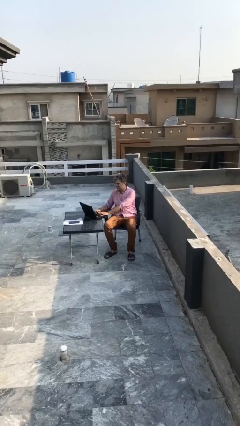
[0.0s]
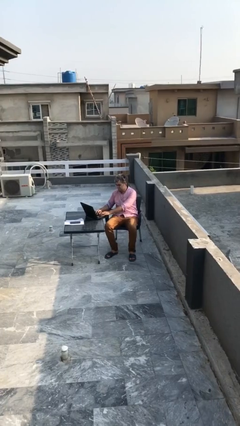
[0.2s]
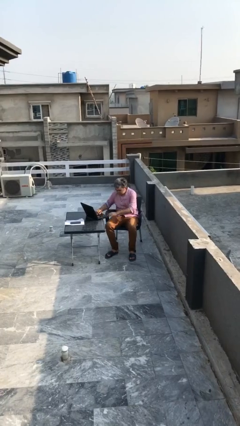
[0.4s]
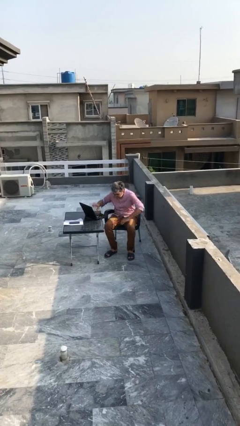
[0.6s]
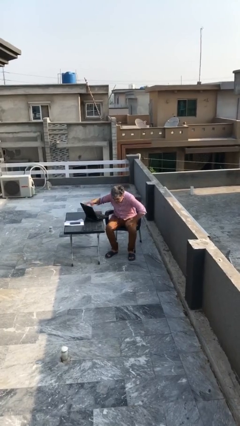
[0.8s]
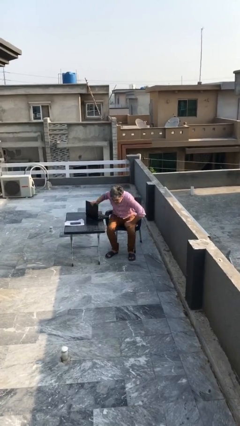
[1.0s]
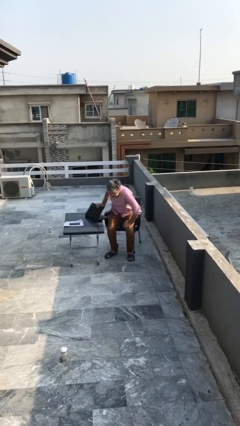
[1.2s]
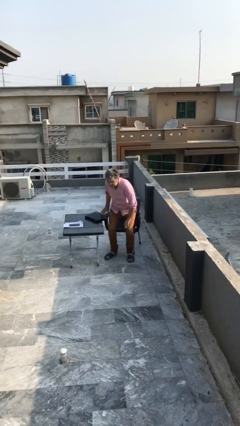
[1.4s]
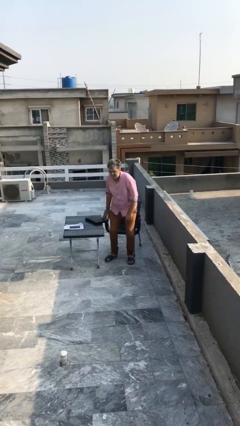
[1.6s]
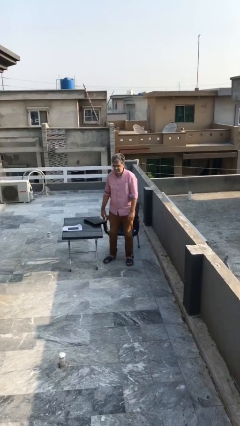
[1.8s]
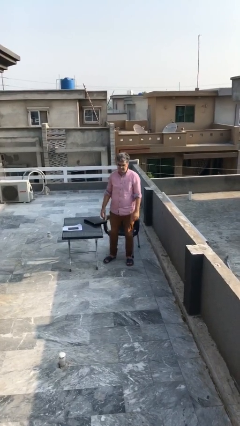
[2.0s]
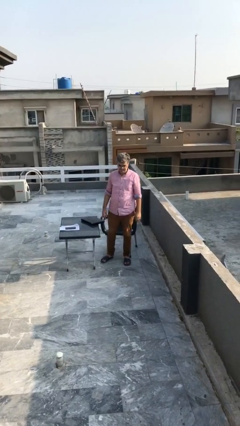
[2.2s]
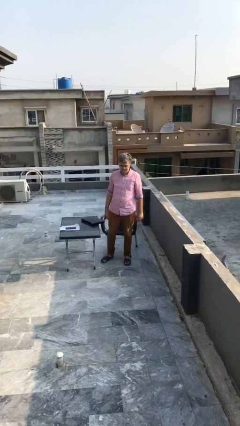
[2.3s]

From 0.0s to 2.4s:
person stands up

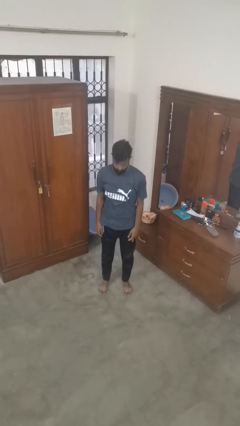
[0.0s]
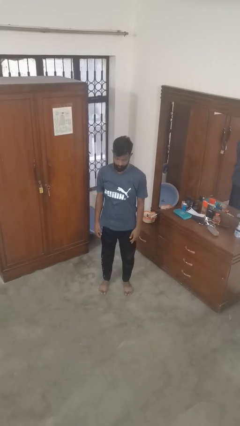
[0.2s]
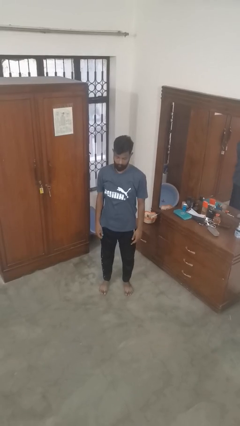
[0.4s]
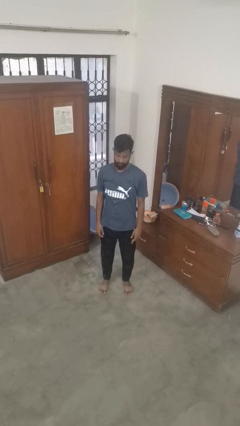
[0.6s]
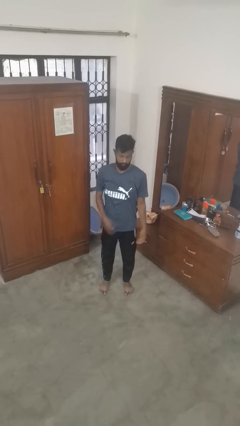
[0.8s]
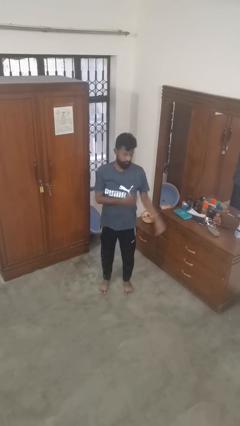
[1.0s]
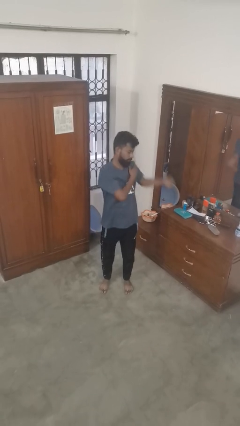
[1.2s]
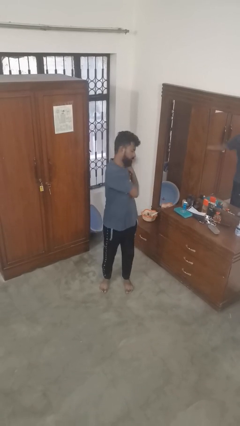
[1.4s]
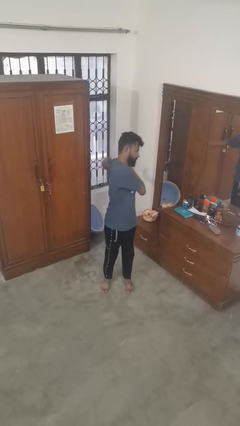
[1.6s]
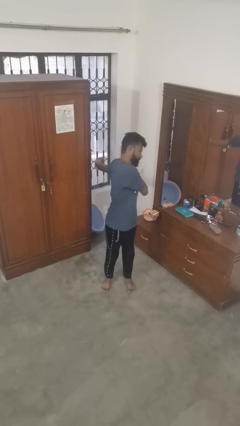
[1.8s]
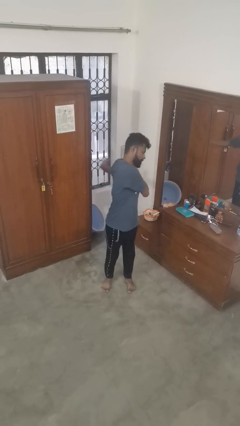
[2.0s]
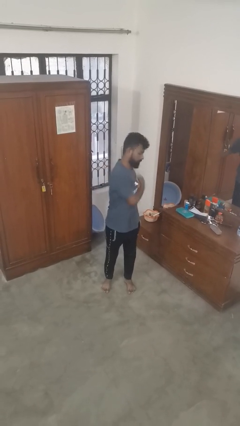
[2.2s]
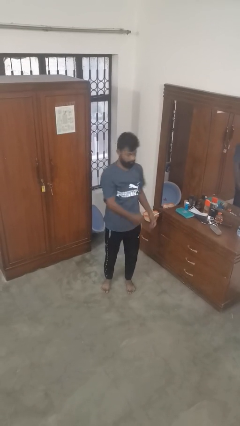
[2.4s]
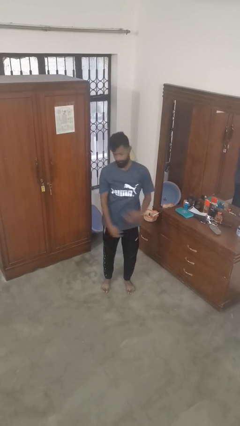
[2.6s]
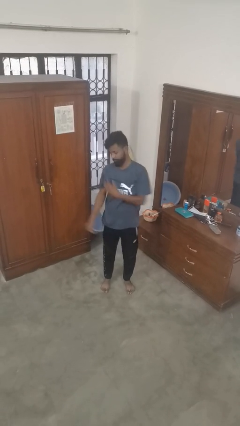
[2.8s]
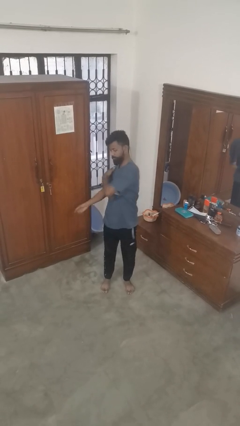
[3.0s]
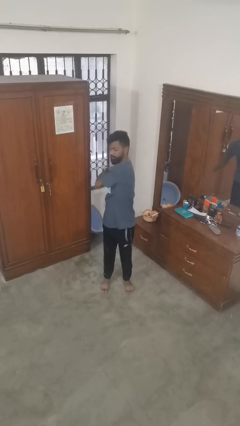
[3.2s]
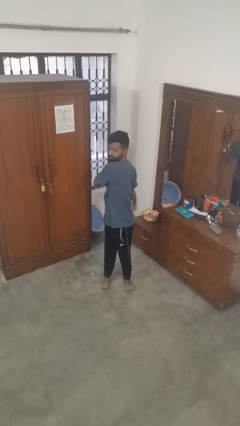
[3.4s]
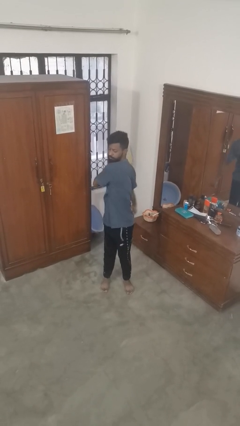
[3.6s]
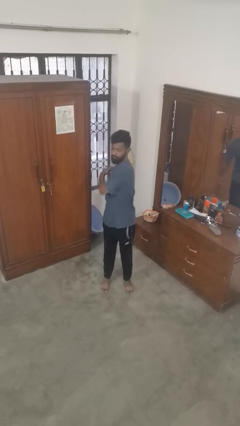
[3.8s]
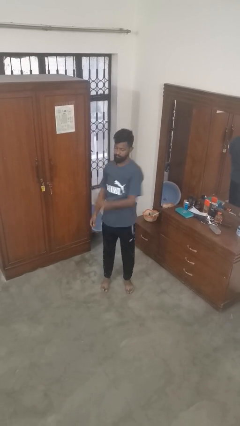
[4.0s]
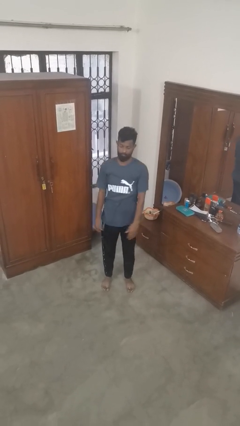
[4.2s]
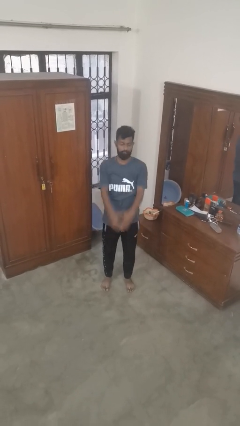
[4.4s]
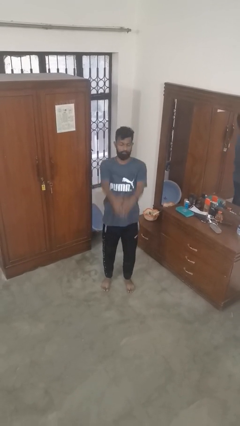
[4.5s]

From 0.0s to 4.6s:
person stretches arms to side

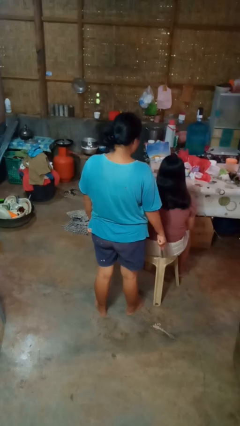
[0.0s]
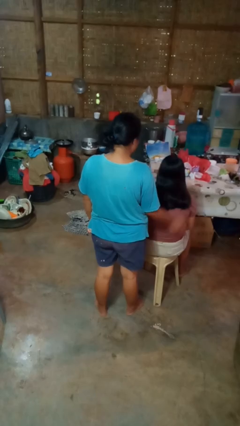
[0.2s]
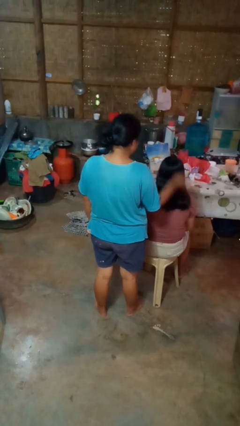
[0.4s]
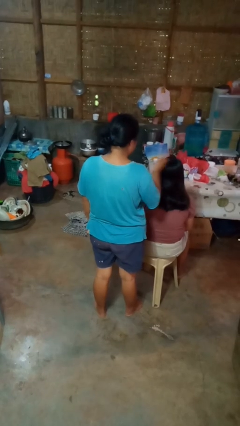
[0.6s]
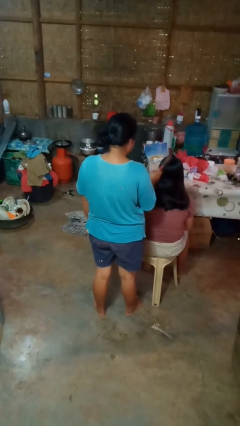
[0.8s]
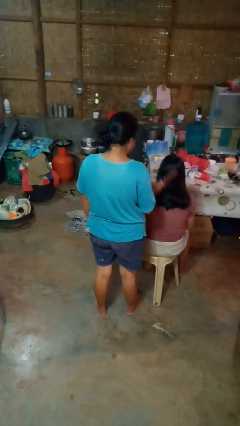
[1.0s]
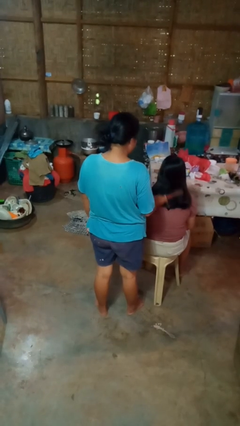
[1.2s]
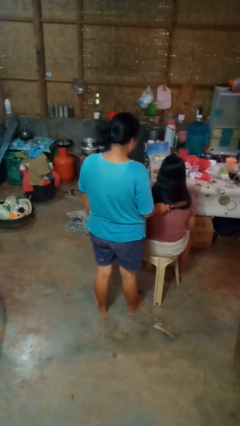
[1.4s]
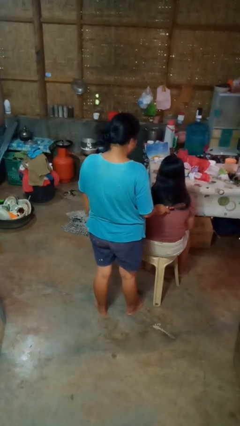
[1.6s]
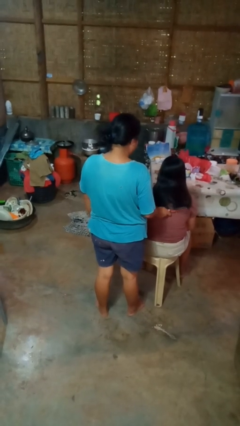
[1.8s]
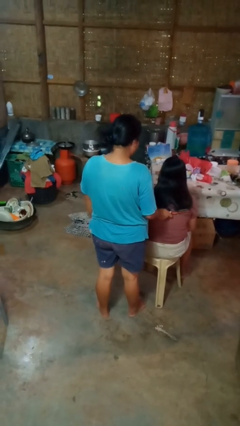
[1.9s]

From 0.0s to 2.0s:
person brushes hair of person

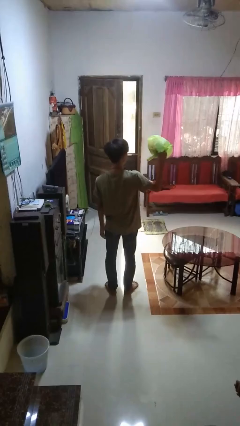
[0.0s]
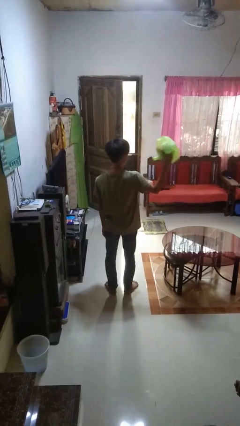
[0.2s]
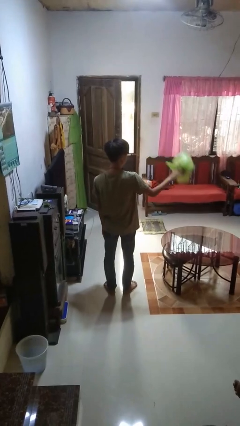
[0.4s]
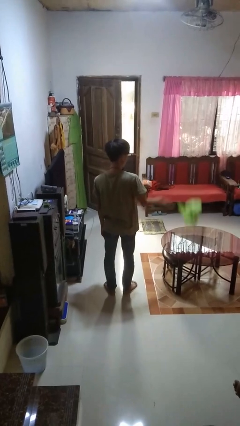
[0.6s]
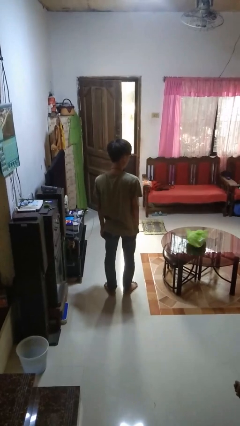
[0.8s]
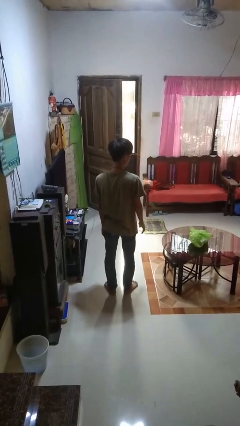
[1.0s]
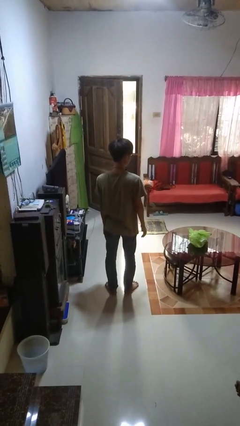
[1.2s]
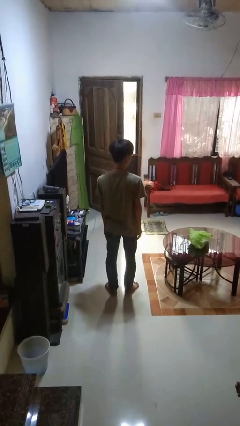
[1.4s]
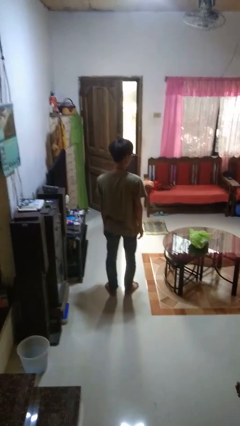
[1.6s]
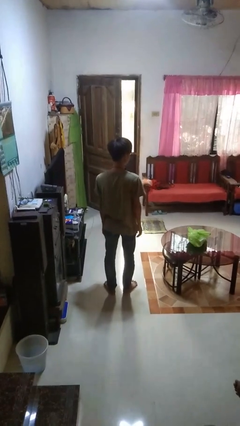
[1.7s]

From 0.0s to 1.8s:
person throws object on table

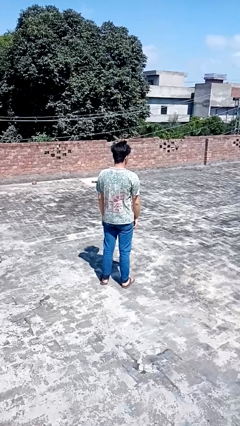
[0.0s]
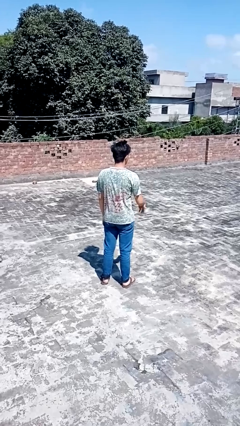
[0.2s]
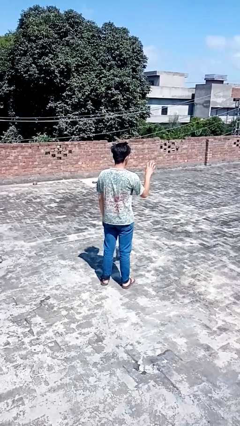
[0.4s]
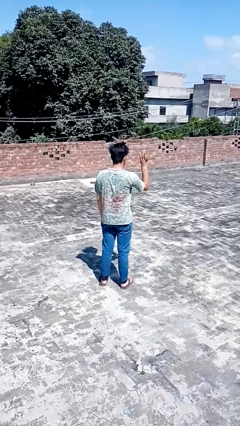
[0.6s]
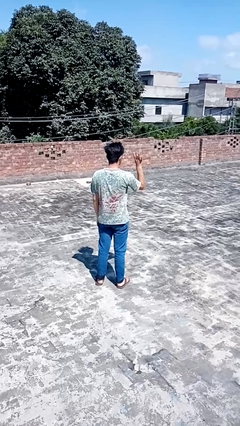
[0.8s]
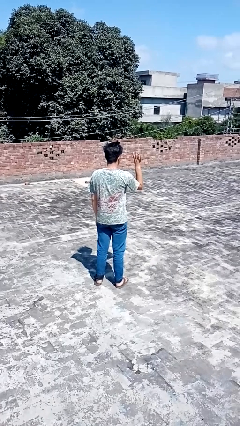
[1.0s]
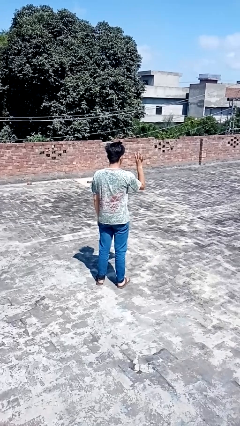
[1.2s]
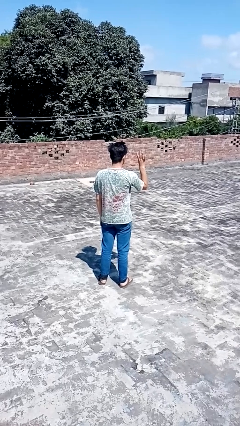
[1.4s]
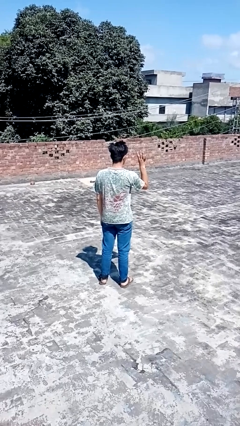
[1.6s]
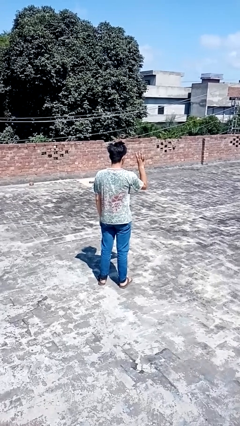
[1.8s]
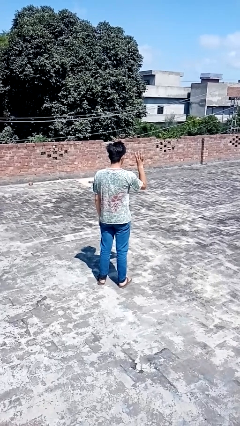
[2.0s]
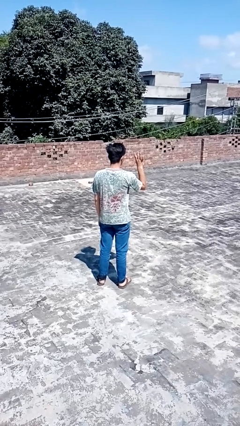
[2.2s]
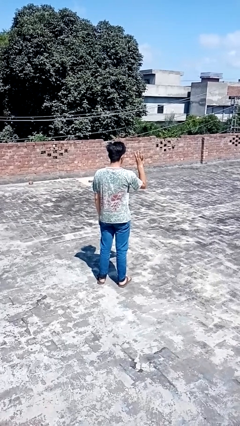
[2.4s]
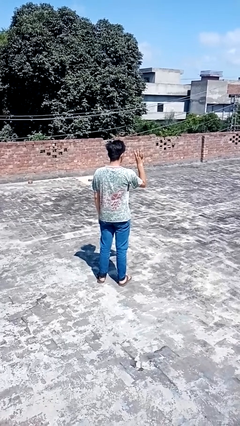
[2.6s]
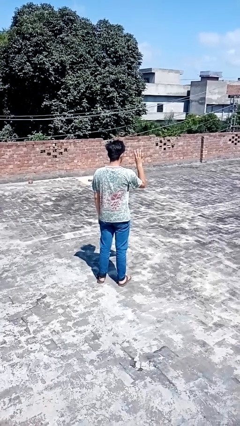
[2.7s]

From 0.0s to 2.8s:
person gestures number four

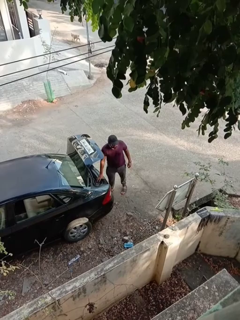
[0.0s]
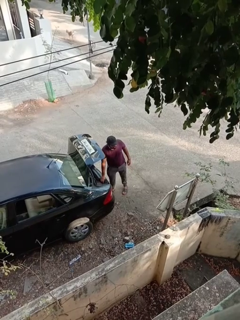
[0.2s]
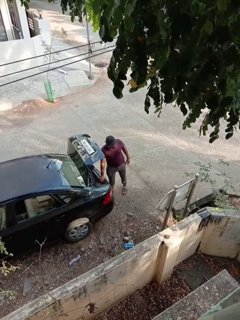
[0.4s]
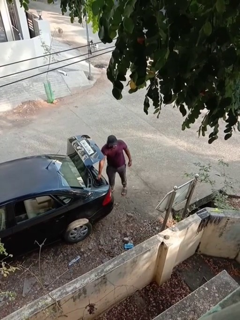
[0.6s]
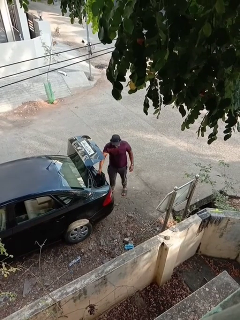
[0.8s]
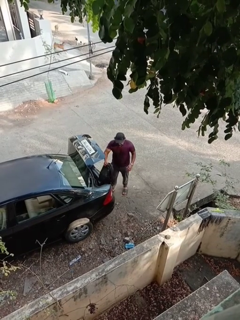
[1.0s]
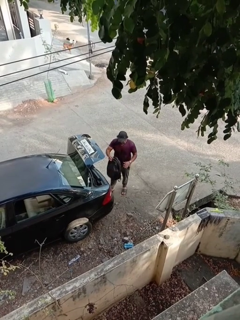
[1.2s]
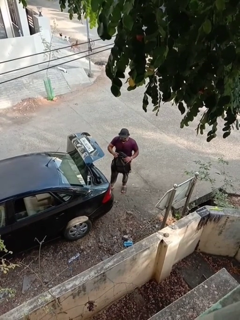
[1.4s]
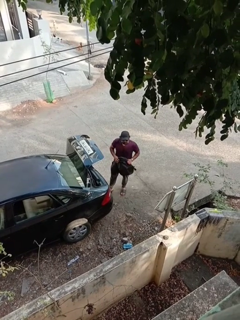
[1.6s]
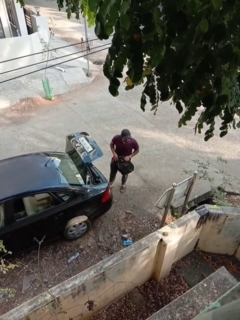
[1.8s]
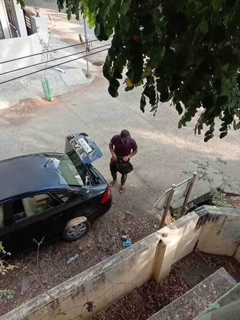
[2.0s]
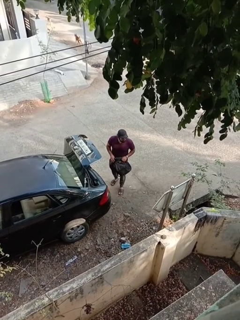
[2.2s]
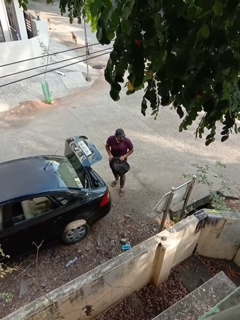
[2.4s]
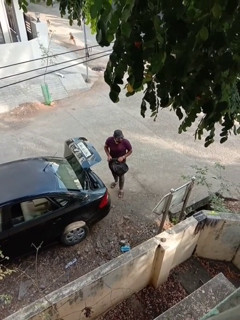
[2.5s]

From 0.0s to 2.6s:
person unloads car

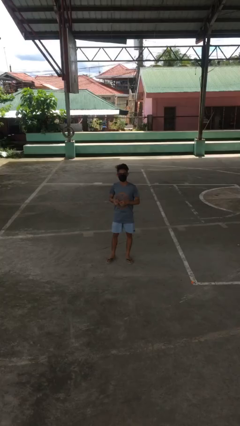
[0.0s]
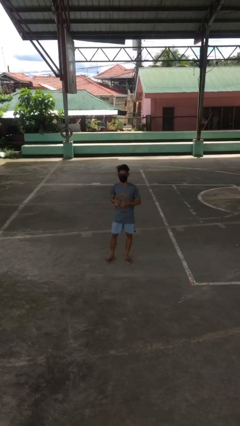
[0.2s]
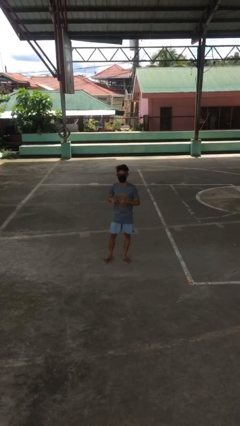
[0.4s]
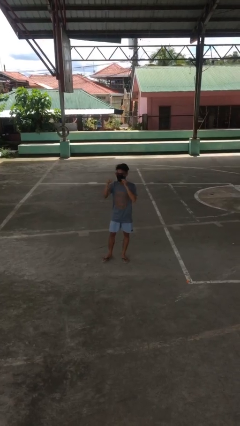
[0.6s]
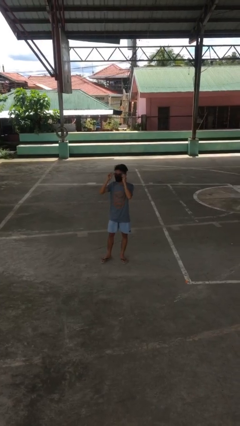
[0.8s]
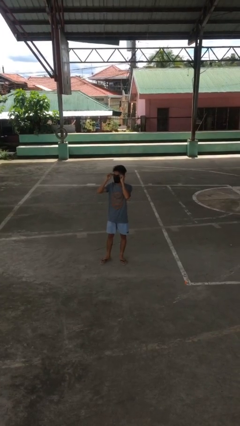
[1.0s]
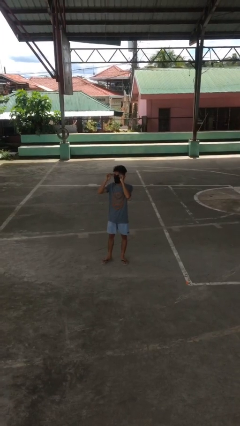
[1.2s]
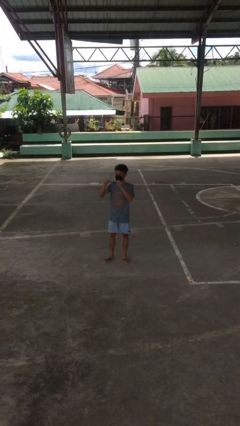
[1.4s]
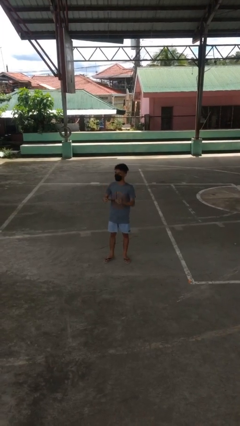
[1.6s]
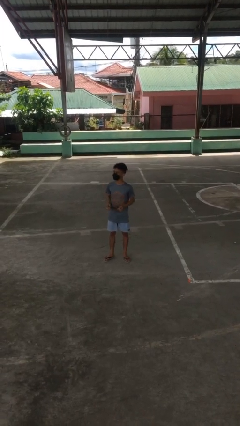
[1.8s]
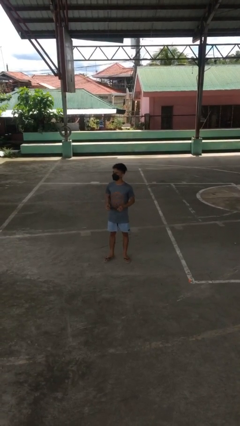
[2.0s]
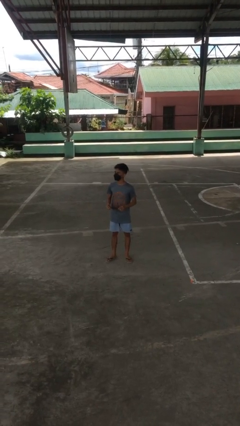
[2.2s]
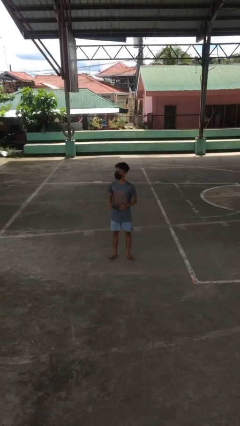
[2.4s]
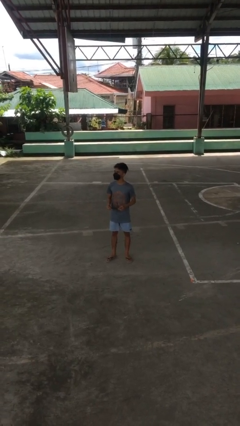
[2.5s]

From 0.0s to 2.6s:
person takes off glasses
